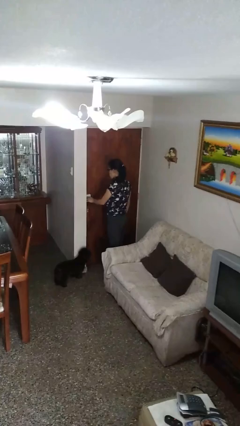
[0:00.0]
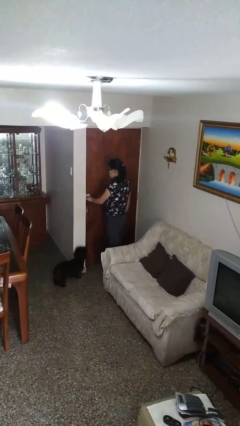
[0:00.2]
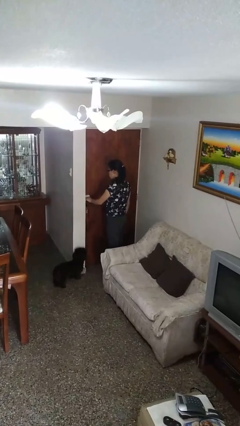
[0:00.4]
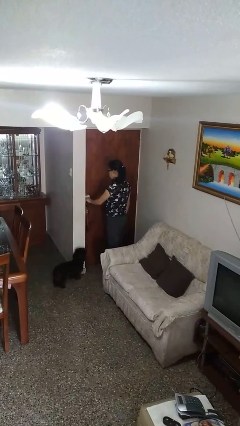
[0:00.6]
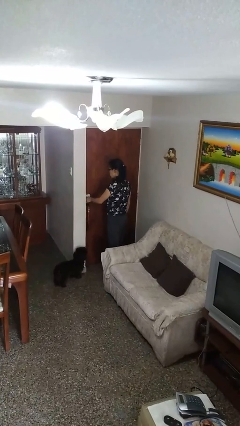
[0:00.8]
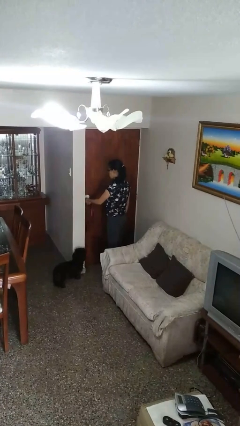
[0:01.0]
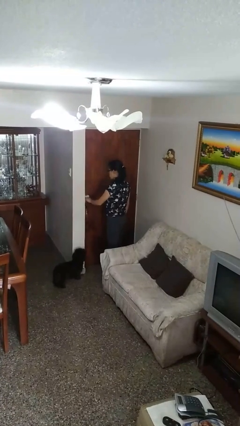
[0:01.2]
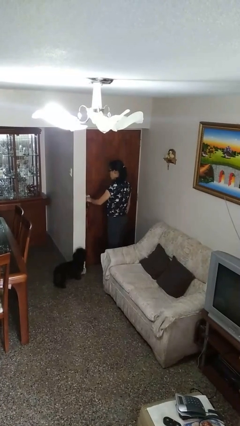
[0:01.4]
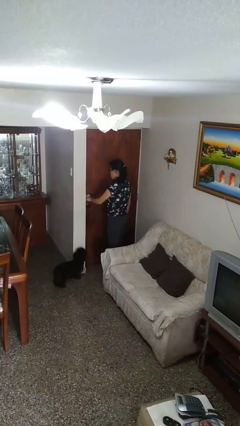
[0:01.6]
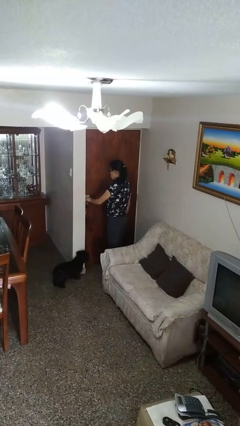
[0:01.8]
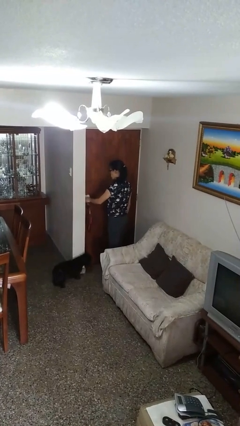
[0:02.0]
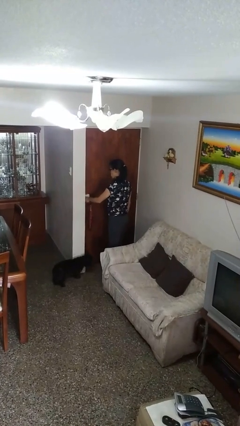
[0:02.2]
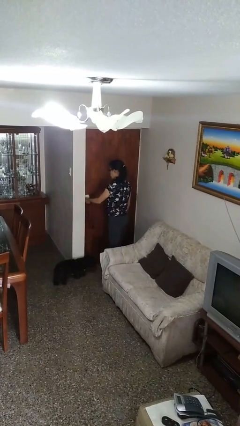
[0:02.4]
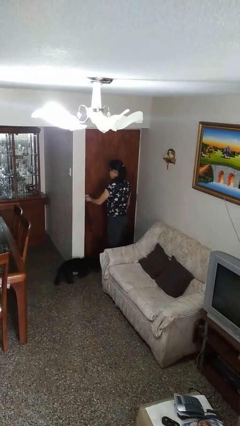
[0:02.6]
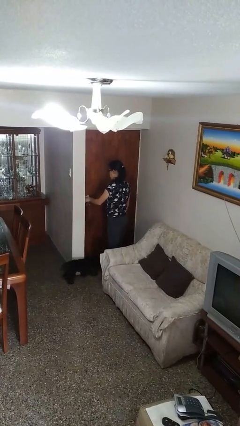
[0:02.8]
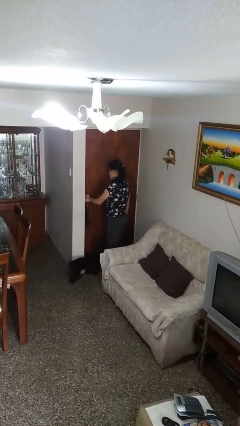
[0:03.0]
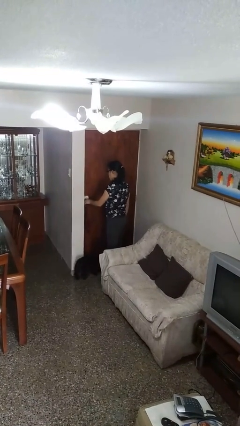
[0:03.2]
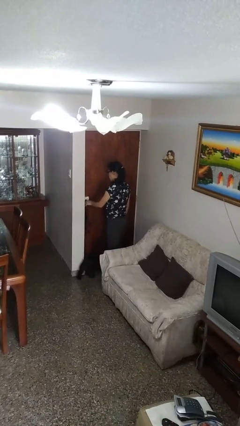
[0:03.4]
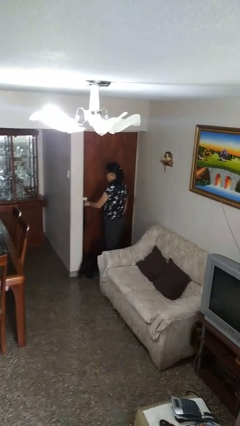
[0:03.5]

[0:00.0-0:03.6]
person locks door with keys

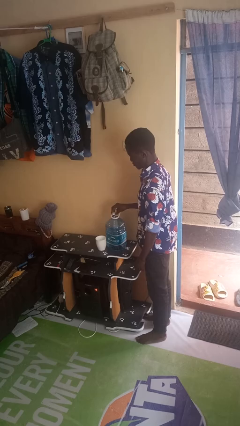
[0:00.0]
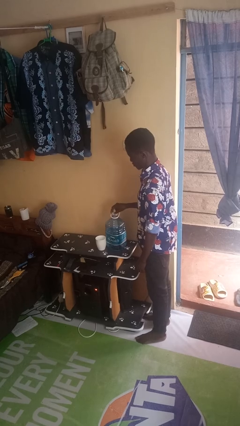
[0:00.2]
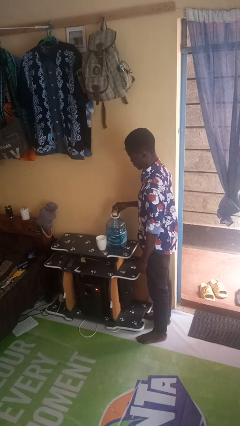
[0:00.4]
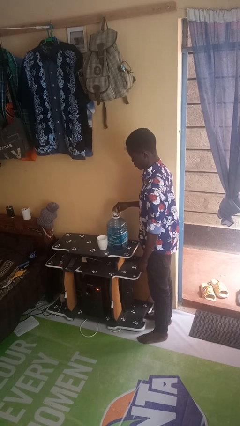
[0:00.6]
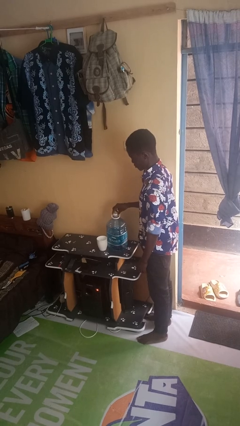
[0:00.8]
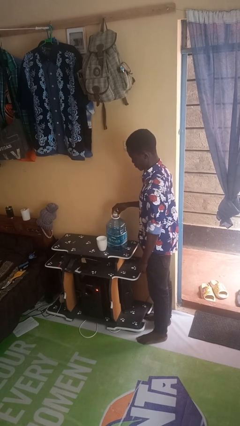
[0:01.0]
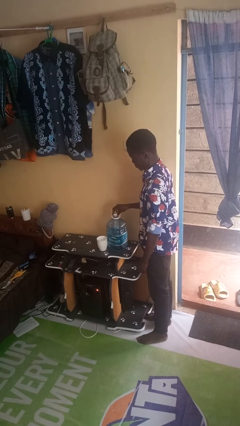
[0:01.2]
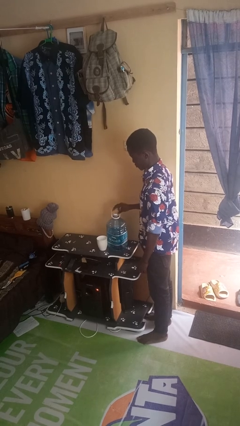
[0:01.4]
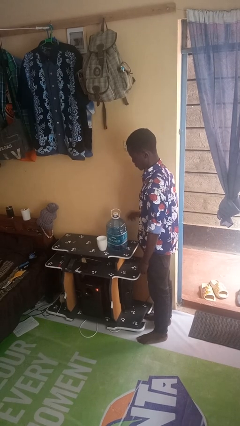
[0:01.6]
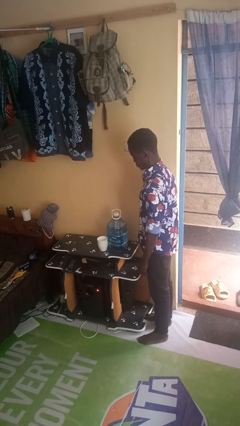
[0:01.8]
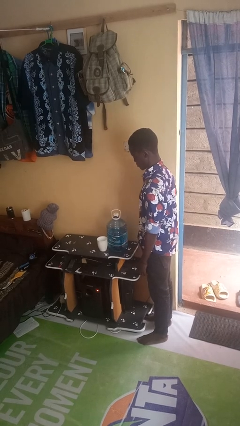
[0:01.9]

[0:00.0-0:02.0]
person screws lid to bottle

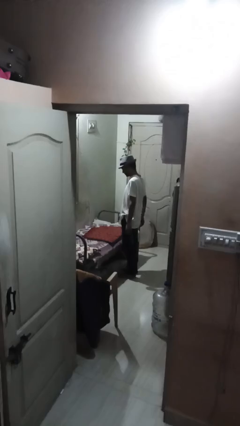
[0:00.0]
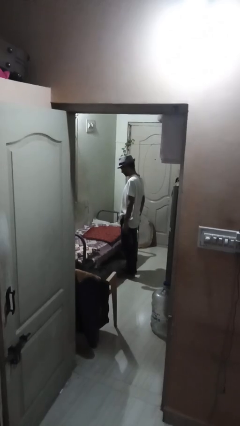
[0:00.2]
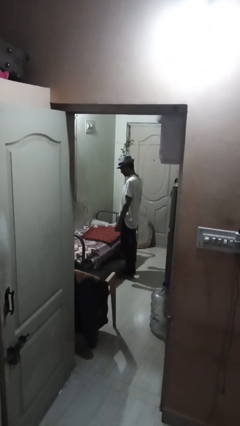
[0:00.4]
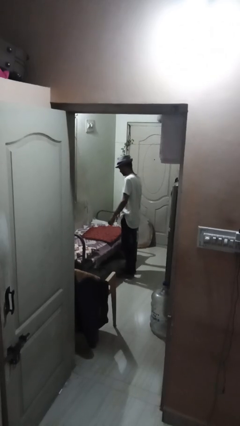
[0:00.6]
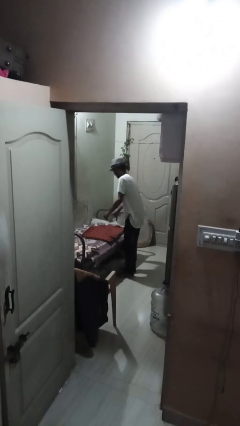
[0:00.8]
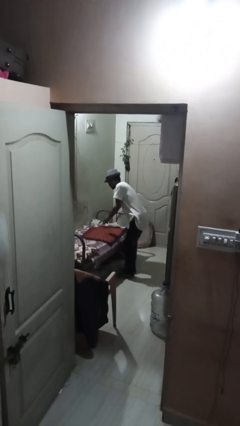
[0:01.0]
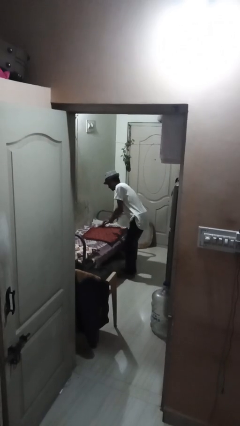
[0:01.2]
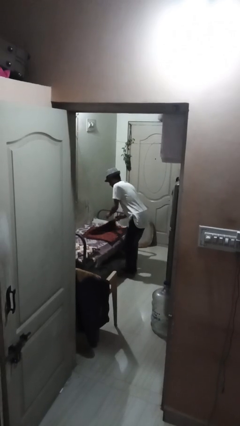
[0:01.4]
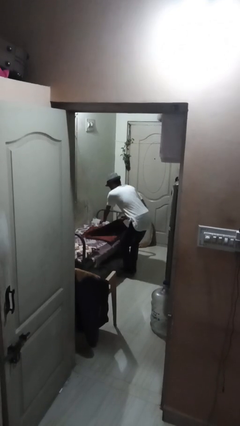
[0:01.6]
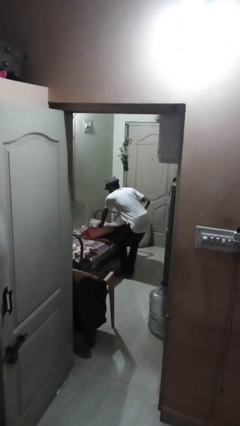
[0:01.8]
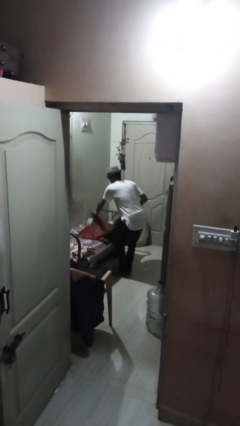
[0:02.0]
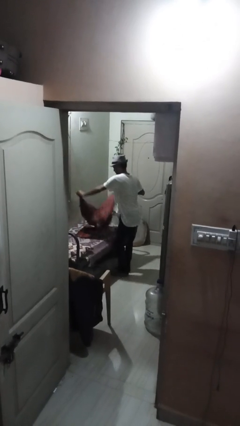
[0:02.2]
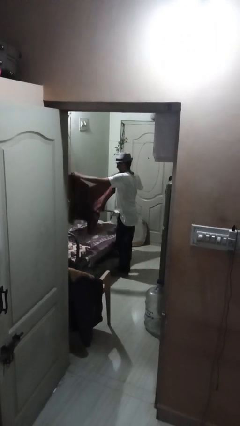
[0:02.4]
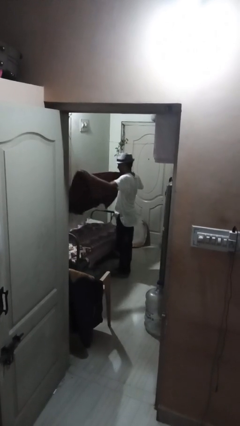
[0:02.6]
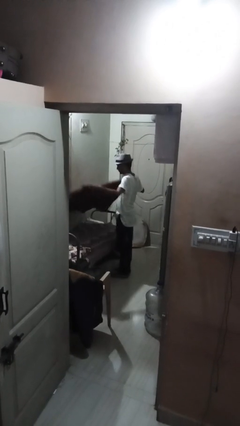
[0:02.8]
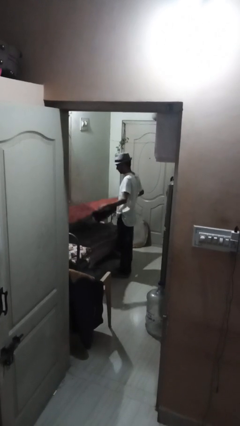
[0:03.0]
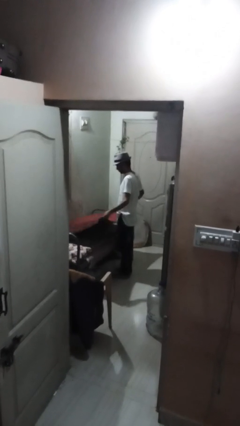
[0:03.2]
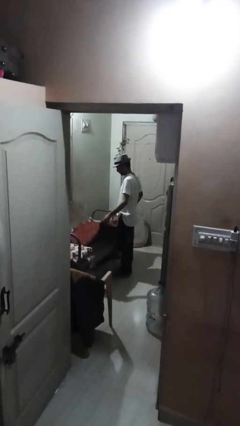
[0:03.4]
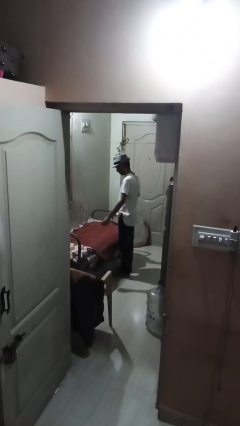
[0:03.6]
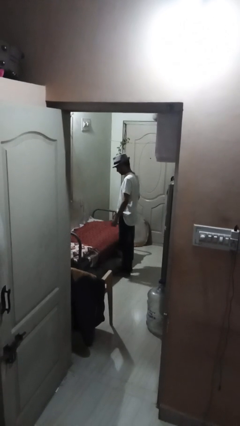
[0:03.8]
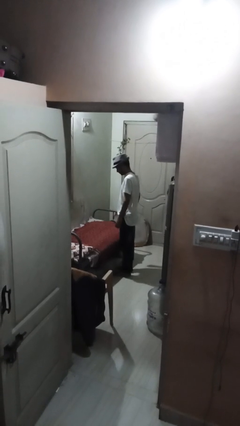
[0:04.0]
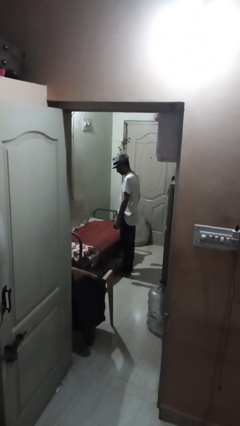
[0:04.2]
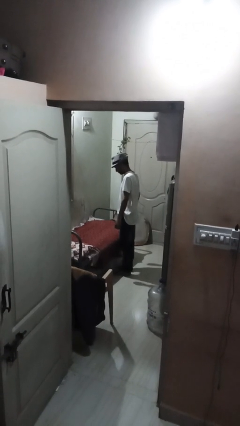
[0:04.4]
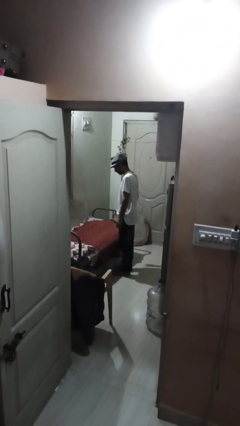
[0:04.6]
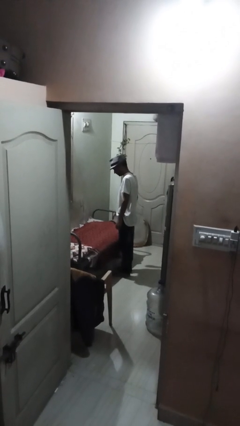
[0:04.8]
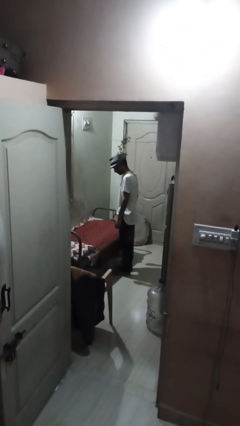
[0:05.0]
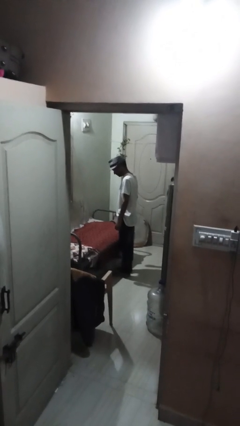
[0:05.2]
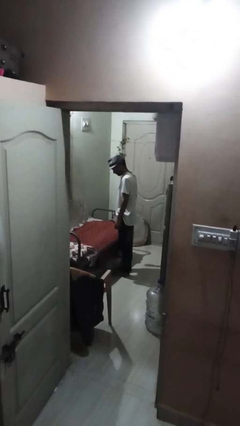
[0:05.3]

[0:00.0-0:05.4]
person unfolds blanket

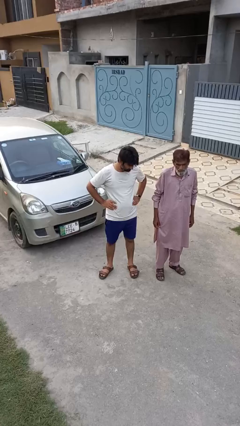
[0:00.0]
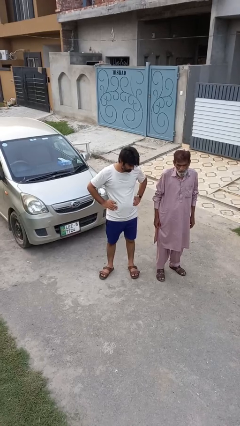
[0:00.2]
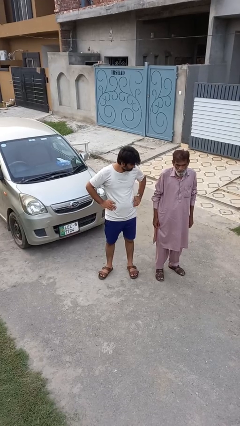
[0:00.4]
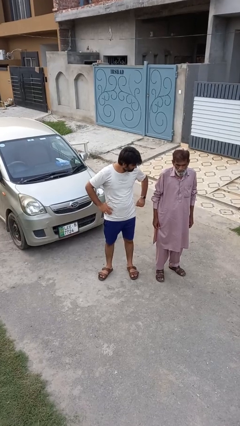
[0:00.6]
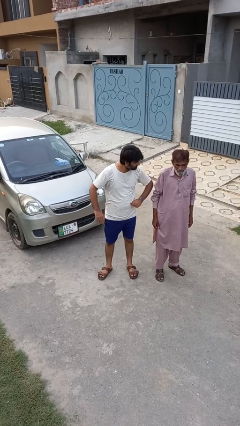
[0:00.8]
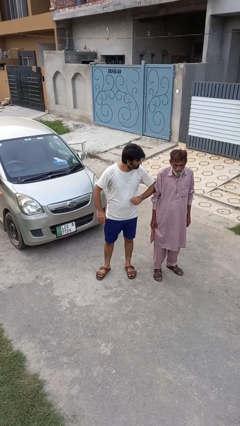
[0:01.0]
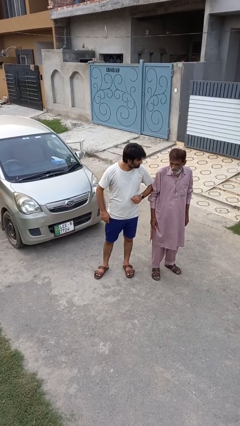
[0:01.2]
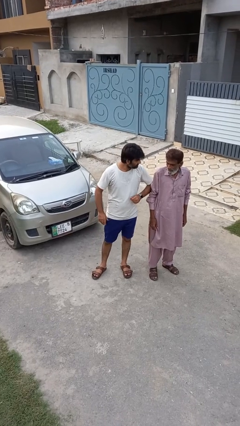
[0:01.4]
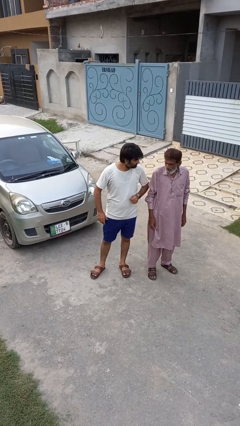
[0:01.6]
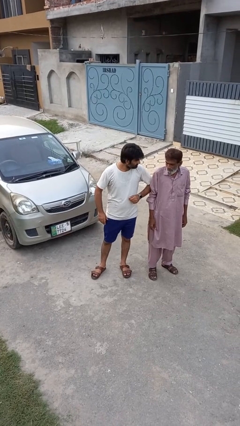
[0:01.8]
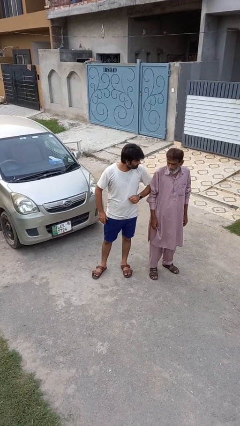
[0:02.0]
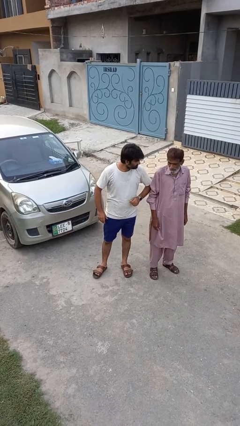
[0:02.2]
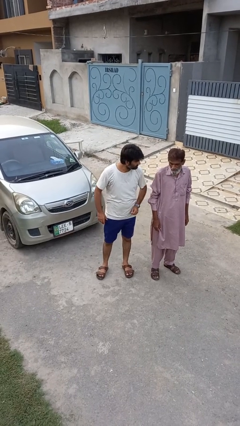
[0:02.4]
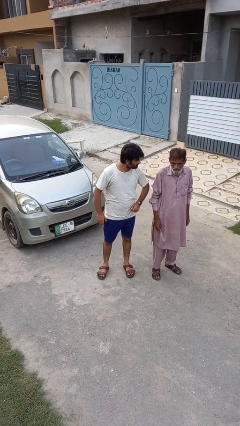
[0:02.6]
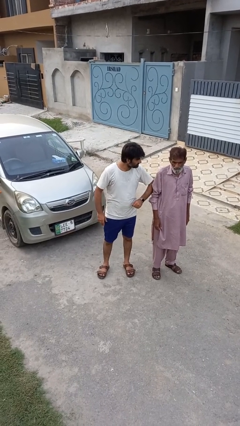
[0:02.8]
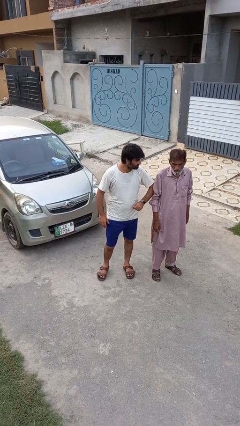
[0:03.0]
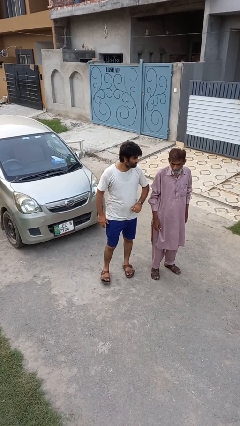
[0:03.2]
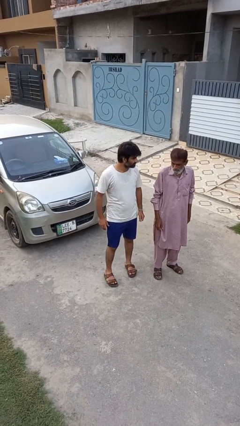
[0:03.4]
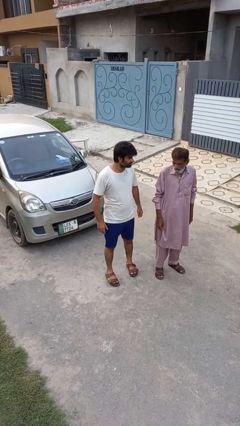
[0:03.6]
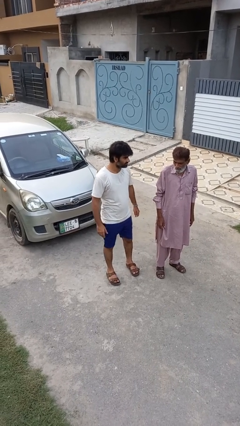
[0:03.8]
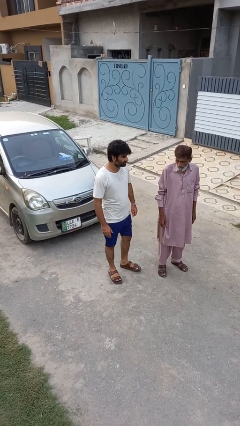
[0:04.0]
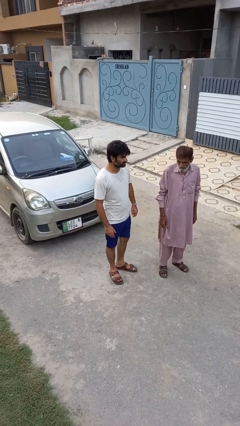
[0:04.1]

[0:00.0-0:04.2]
person nudges person with elbow

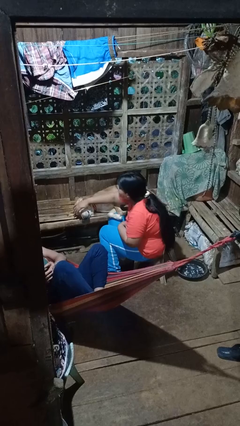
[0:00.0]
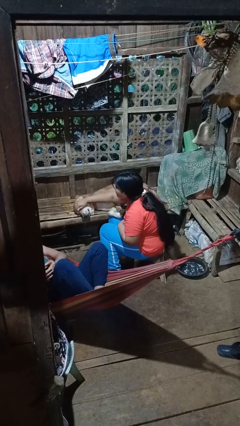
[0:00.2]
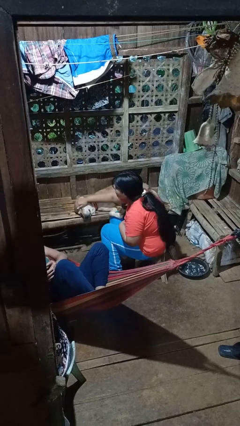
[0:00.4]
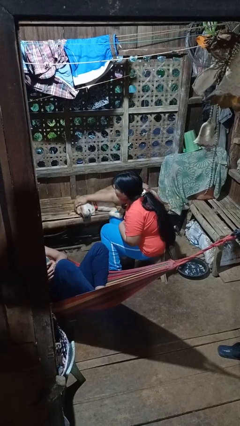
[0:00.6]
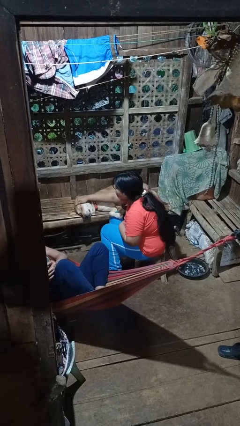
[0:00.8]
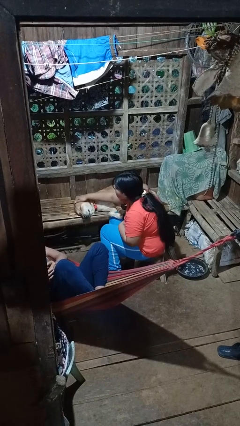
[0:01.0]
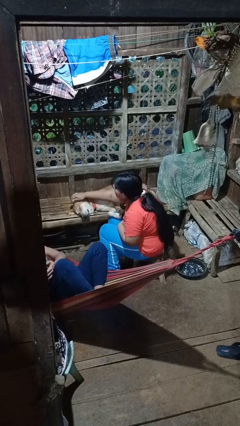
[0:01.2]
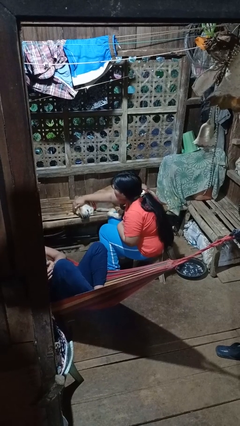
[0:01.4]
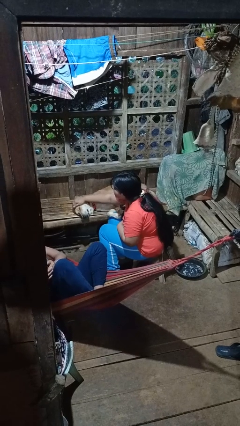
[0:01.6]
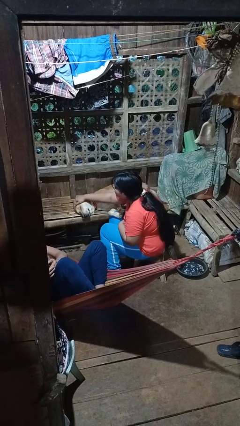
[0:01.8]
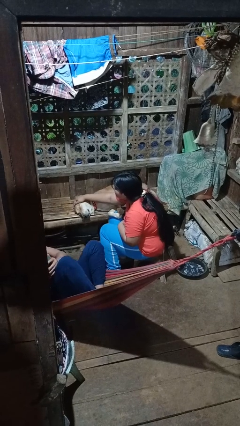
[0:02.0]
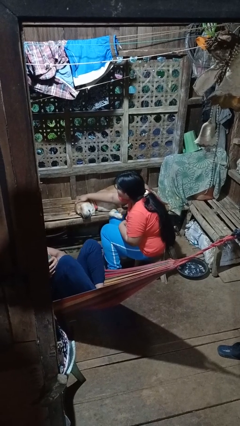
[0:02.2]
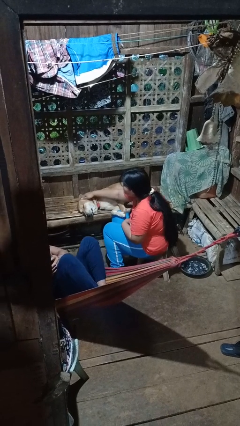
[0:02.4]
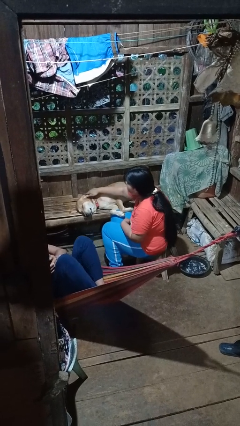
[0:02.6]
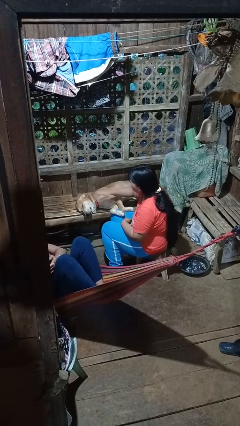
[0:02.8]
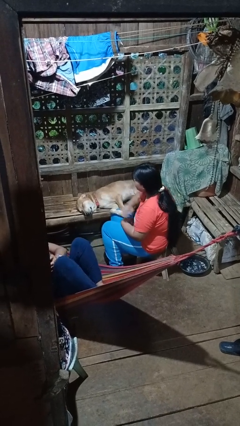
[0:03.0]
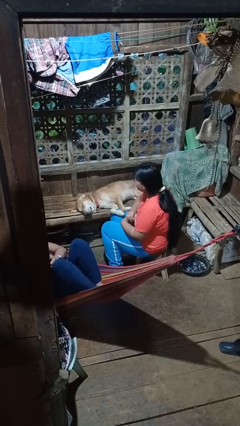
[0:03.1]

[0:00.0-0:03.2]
person pets dog
